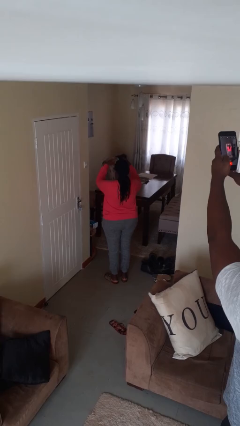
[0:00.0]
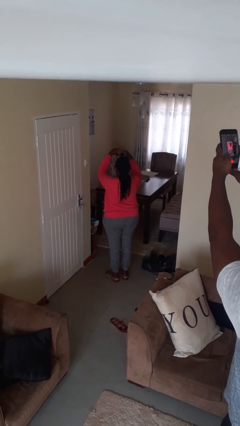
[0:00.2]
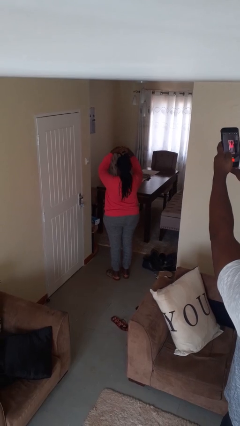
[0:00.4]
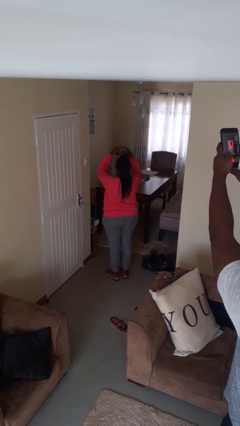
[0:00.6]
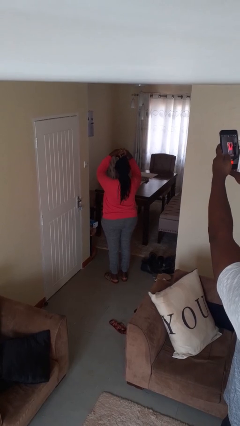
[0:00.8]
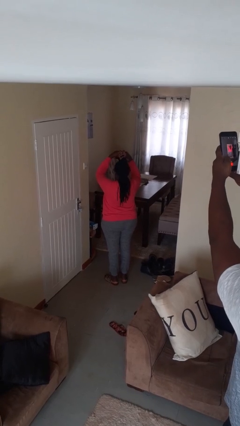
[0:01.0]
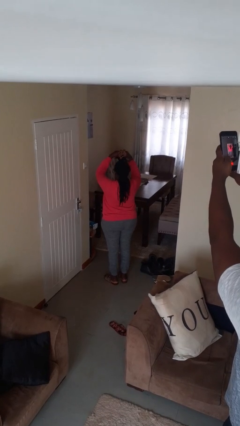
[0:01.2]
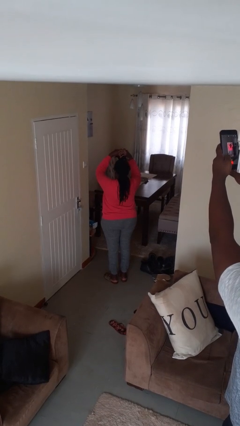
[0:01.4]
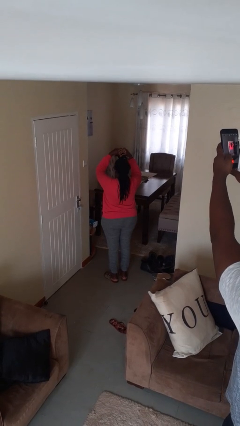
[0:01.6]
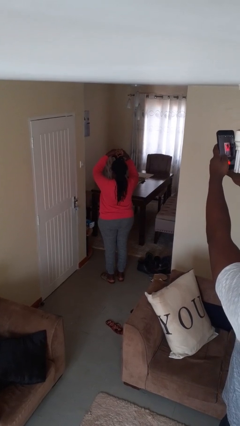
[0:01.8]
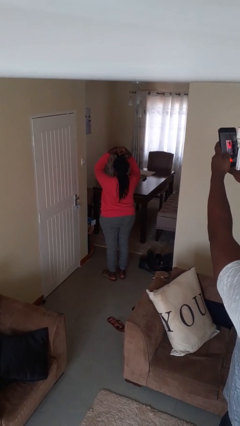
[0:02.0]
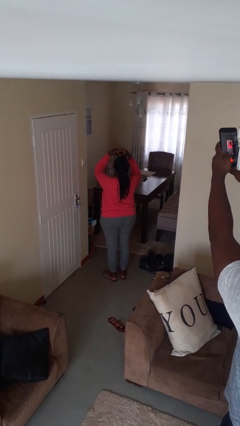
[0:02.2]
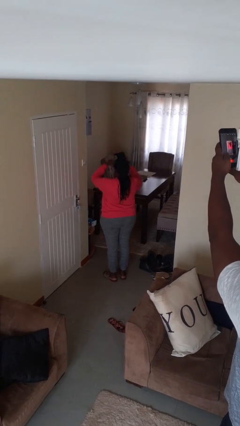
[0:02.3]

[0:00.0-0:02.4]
person gestures heart

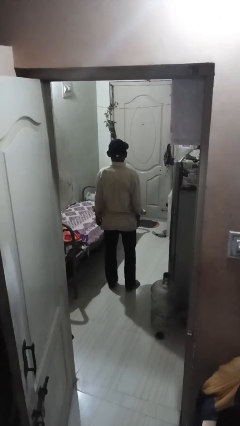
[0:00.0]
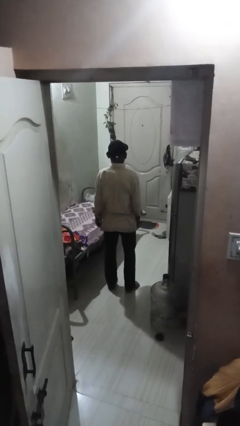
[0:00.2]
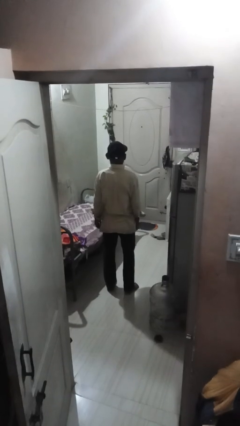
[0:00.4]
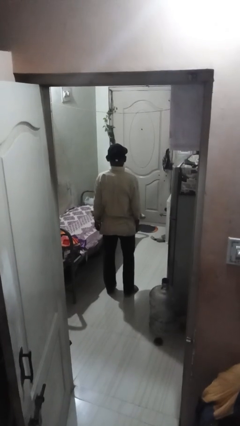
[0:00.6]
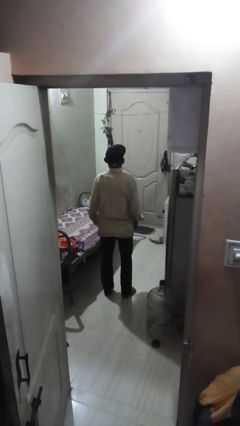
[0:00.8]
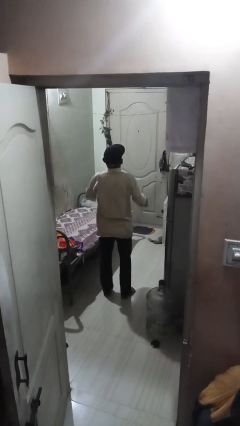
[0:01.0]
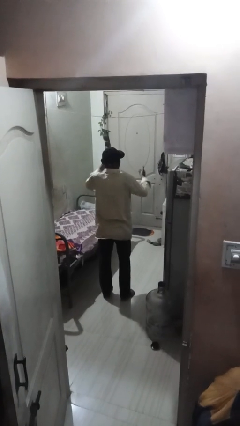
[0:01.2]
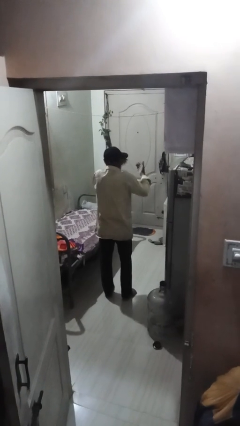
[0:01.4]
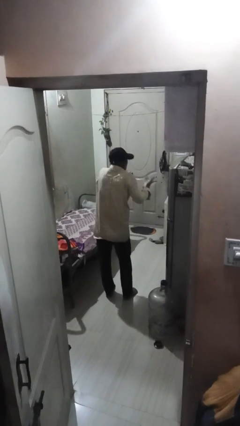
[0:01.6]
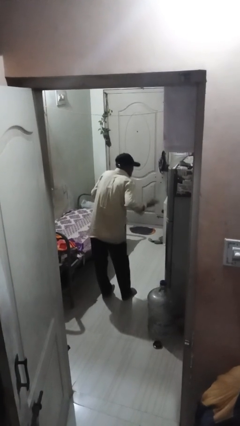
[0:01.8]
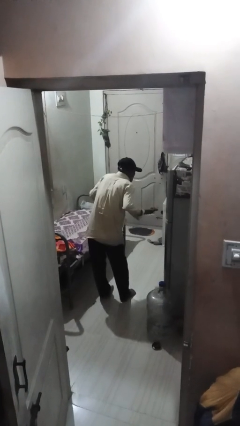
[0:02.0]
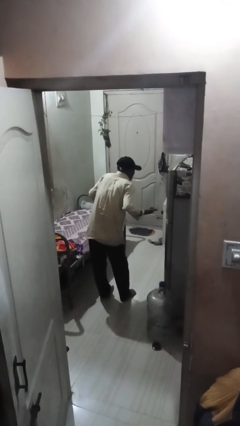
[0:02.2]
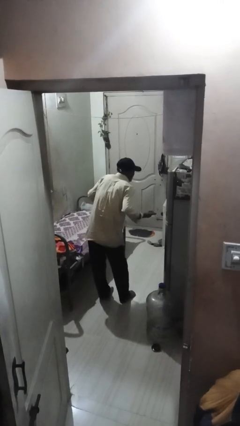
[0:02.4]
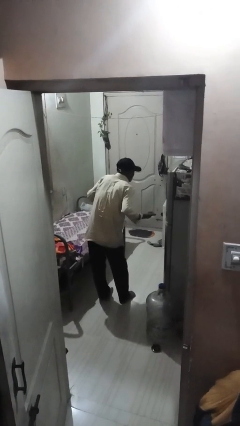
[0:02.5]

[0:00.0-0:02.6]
person shrugs

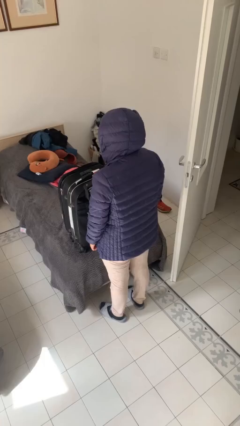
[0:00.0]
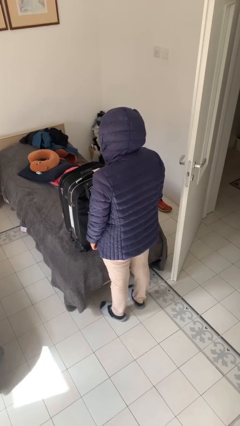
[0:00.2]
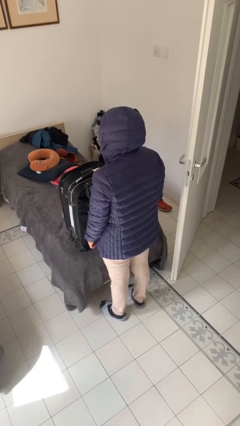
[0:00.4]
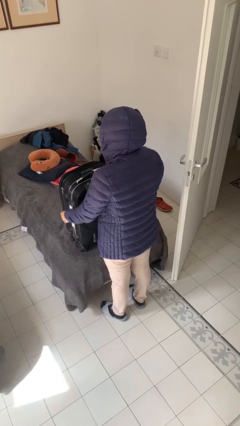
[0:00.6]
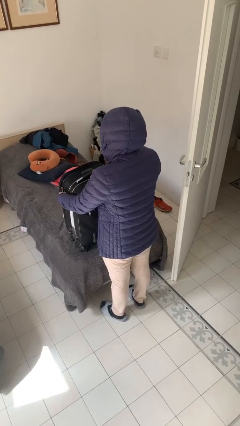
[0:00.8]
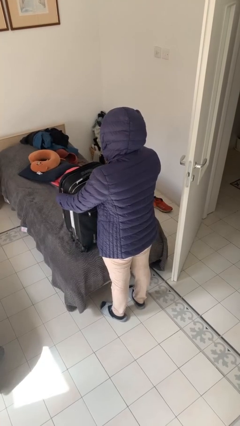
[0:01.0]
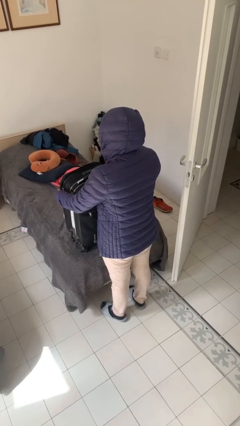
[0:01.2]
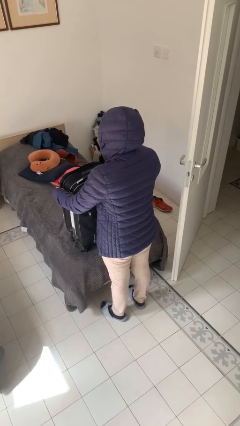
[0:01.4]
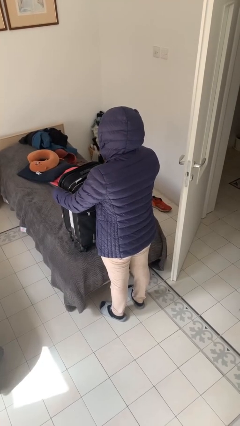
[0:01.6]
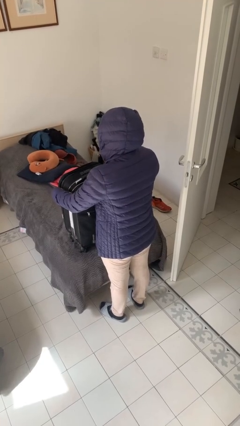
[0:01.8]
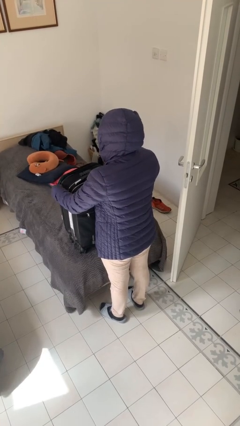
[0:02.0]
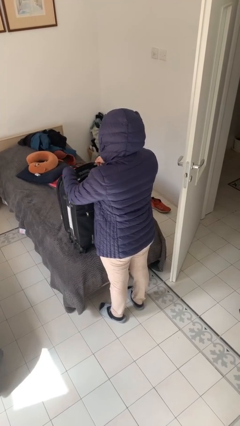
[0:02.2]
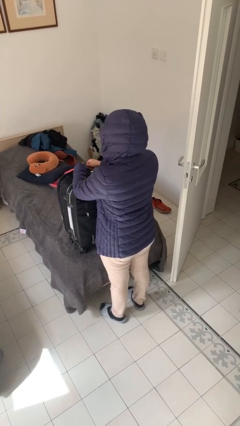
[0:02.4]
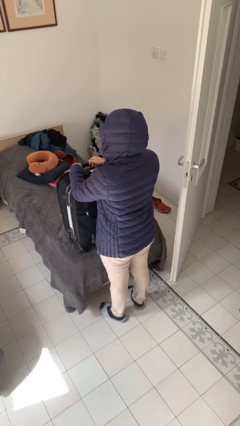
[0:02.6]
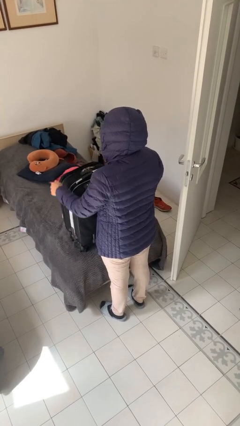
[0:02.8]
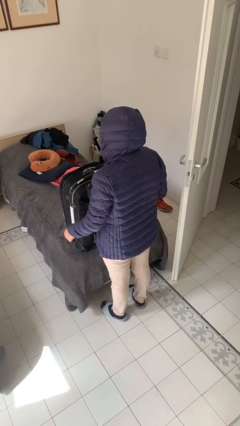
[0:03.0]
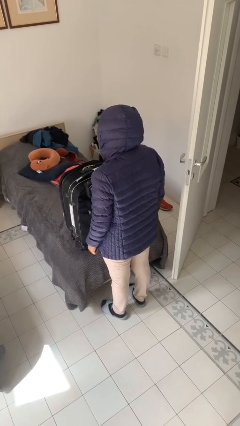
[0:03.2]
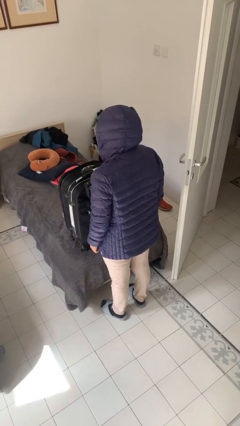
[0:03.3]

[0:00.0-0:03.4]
person closes suitcase

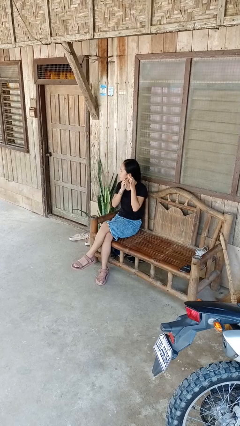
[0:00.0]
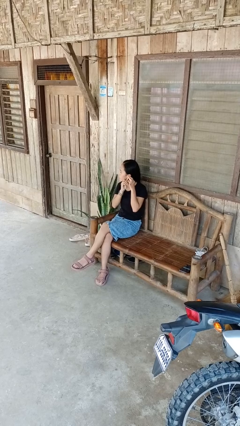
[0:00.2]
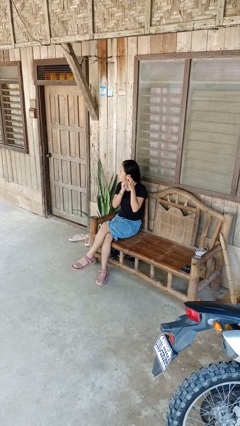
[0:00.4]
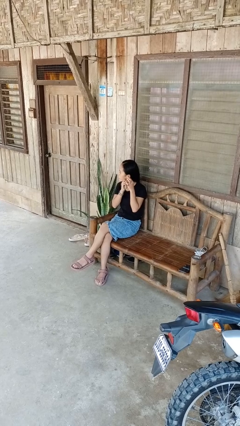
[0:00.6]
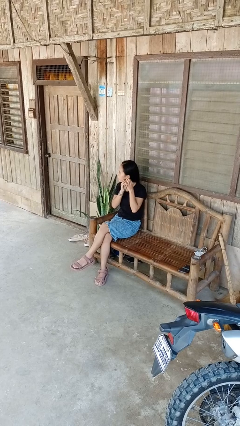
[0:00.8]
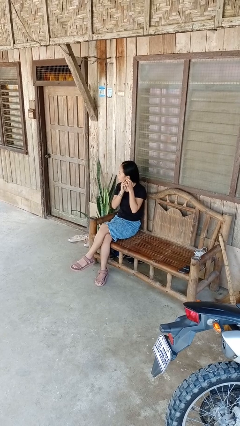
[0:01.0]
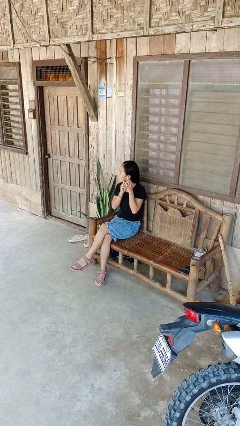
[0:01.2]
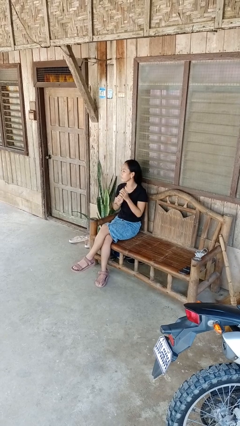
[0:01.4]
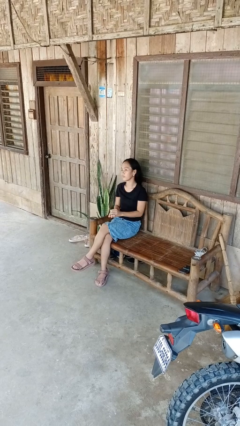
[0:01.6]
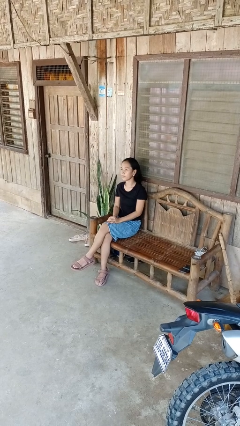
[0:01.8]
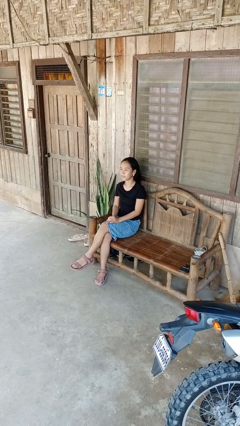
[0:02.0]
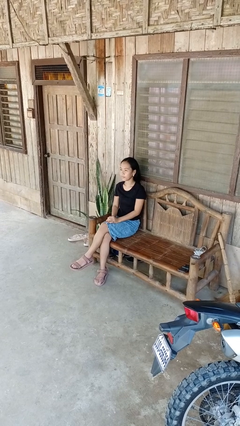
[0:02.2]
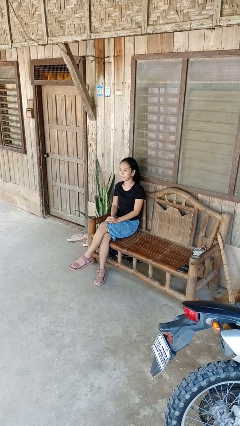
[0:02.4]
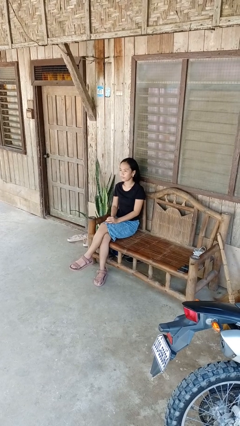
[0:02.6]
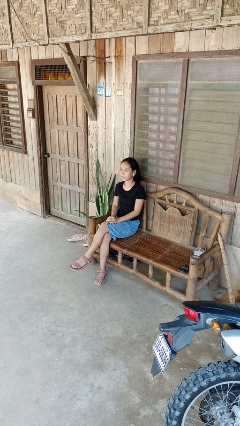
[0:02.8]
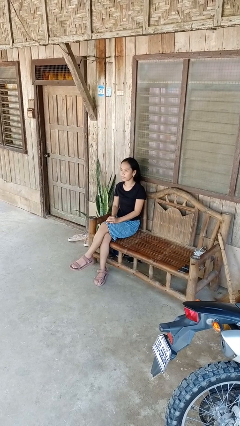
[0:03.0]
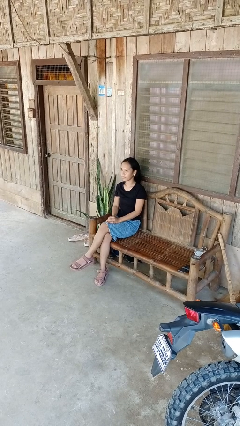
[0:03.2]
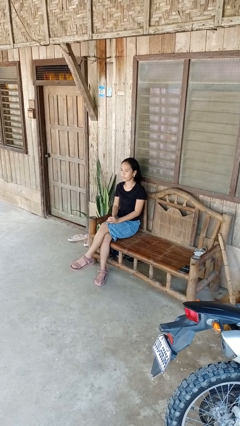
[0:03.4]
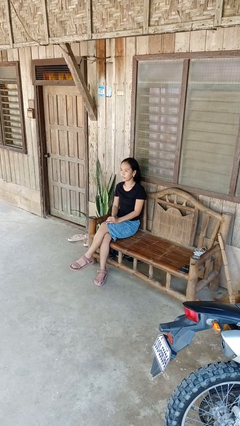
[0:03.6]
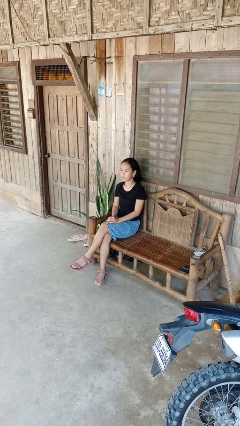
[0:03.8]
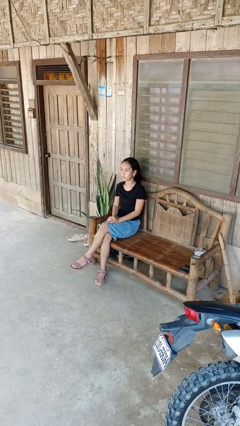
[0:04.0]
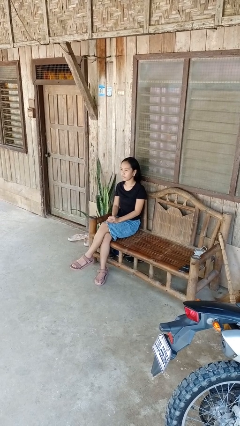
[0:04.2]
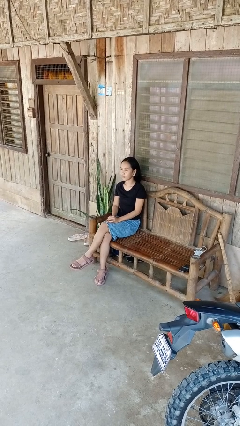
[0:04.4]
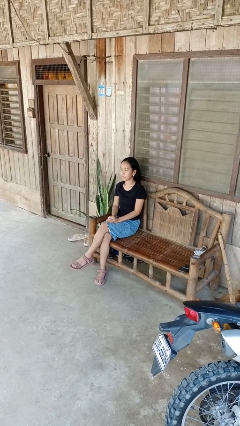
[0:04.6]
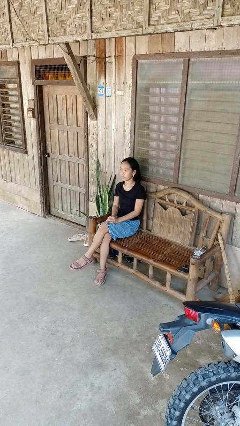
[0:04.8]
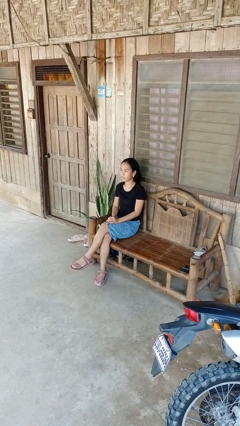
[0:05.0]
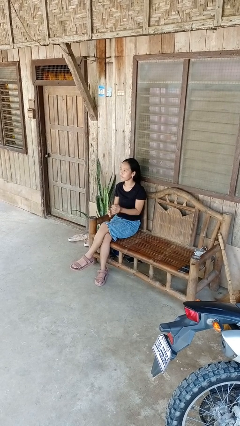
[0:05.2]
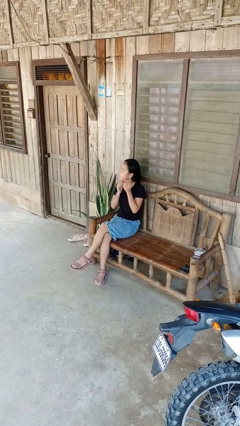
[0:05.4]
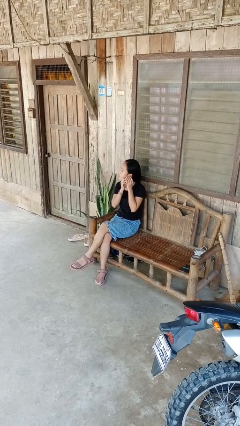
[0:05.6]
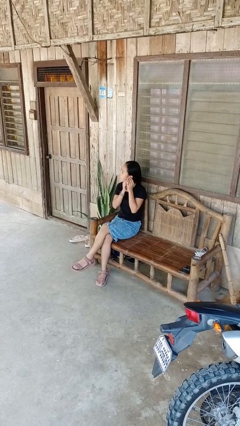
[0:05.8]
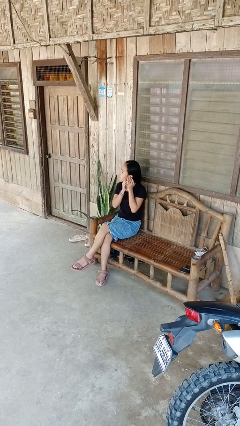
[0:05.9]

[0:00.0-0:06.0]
person puts on earrings

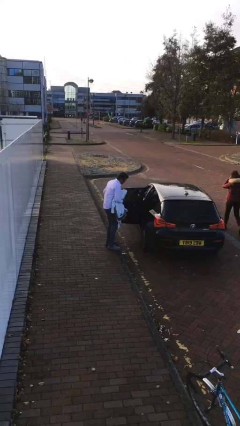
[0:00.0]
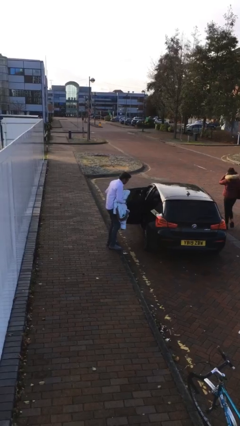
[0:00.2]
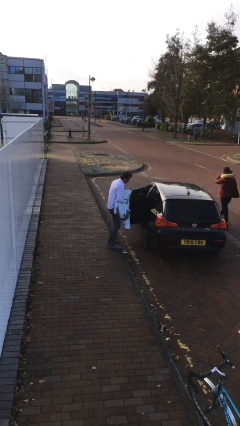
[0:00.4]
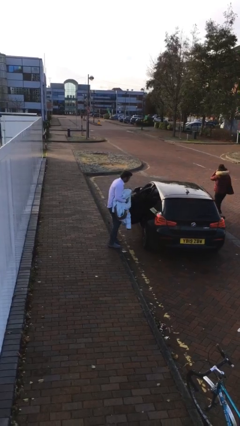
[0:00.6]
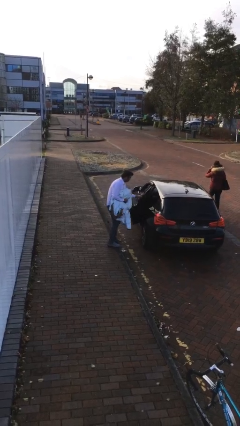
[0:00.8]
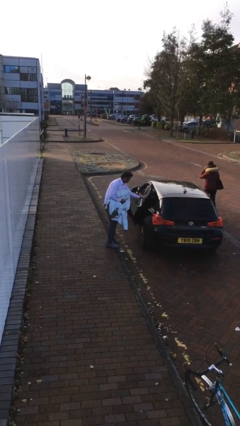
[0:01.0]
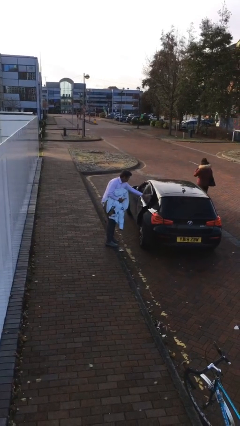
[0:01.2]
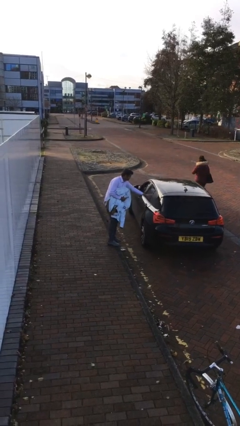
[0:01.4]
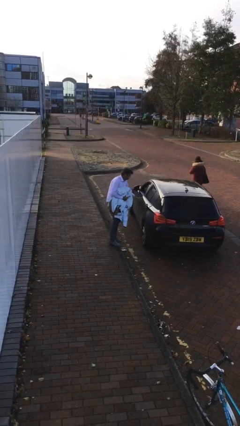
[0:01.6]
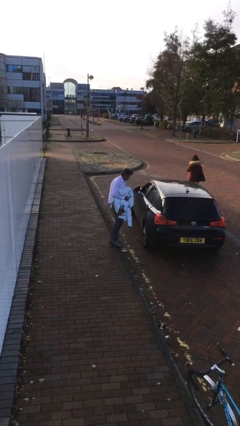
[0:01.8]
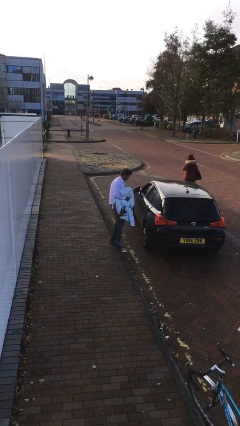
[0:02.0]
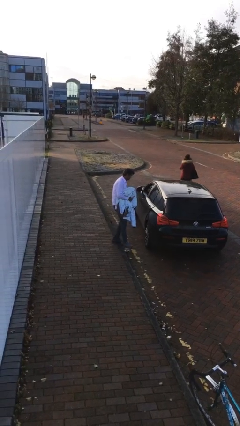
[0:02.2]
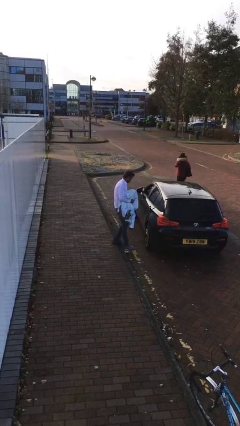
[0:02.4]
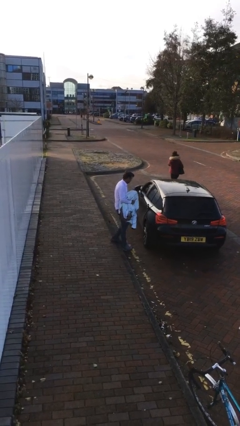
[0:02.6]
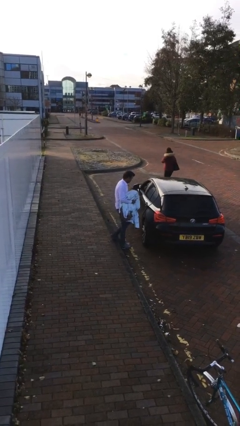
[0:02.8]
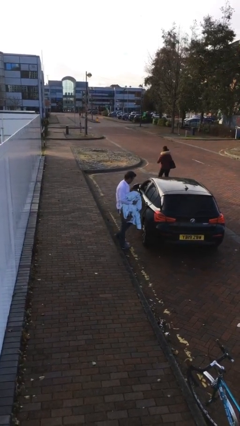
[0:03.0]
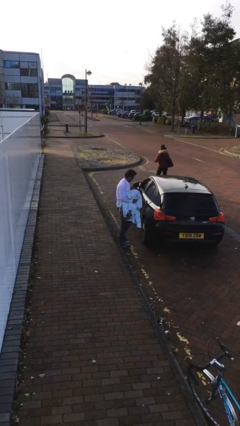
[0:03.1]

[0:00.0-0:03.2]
person closes car door
